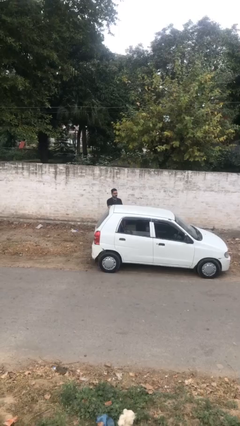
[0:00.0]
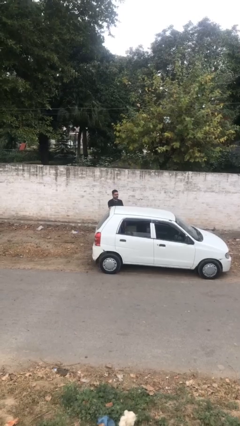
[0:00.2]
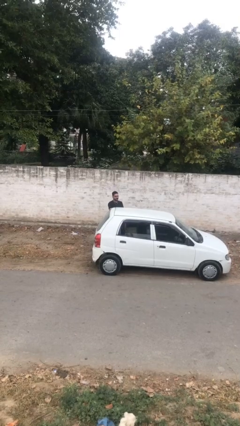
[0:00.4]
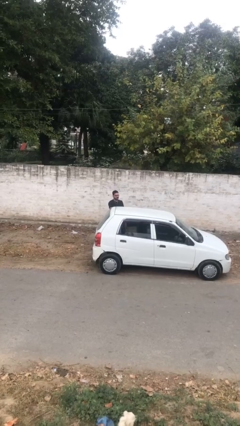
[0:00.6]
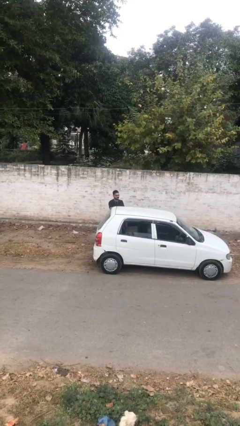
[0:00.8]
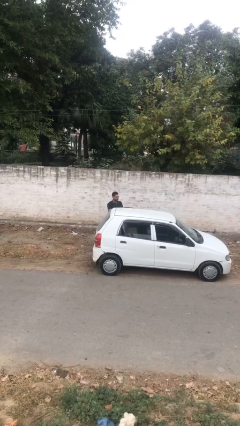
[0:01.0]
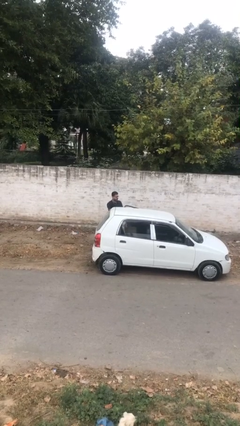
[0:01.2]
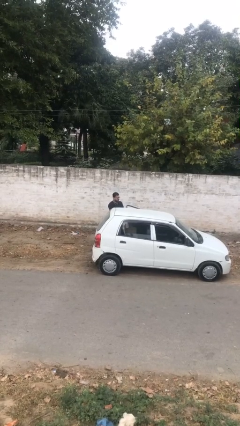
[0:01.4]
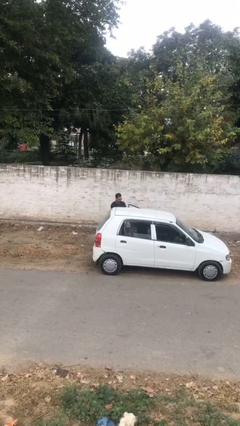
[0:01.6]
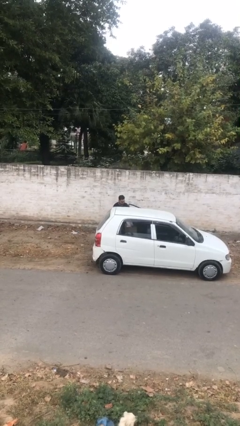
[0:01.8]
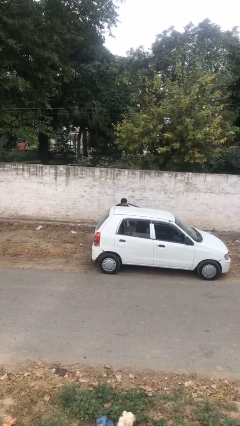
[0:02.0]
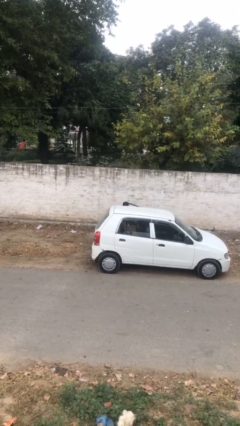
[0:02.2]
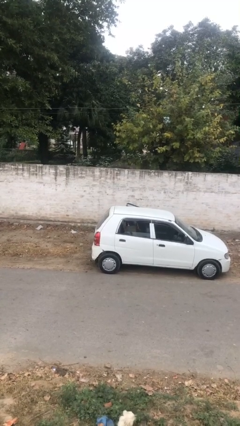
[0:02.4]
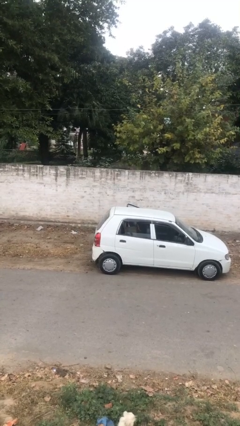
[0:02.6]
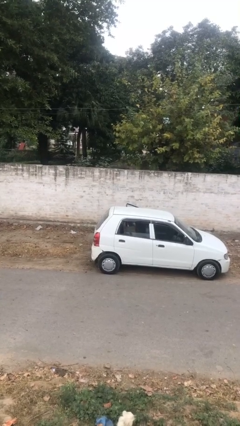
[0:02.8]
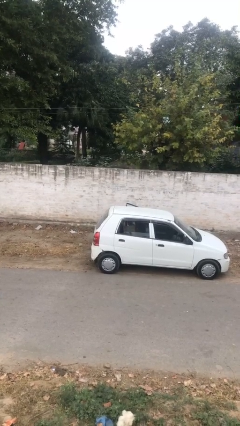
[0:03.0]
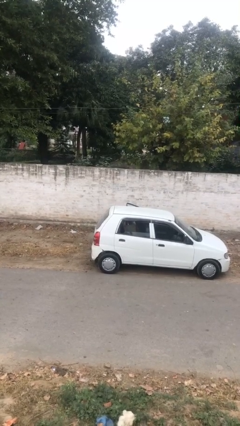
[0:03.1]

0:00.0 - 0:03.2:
person unloads car

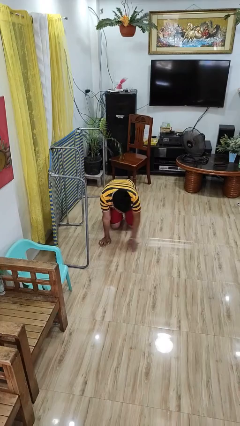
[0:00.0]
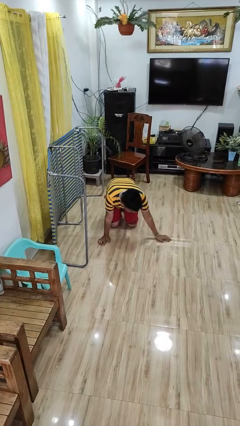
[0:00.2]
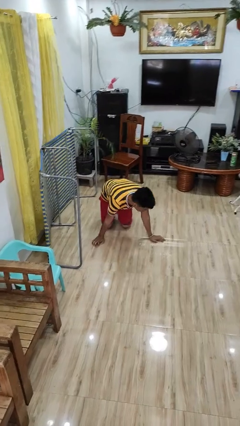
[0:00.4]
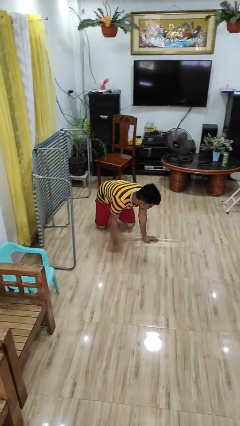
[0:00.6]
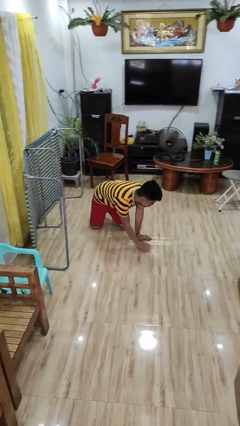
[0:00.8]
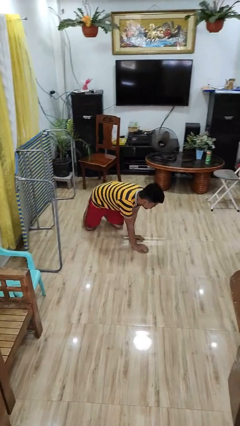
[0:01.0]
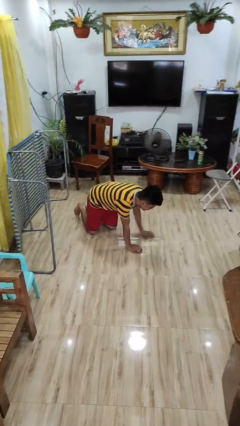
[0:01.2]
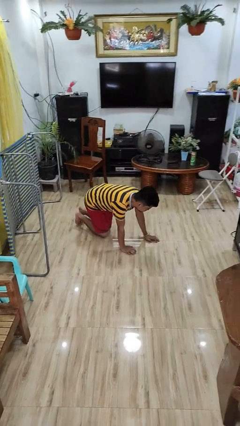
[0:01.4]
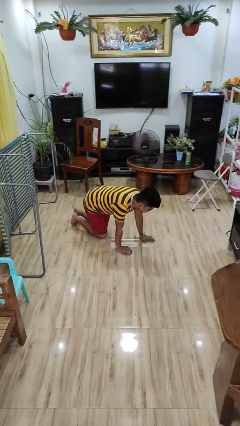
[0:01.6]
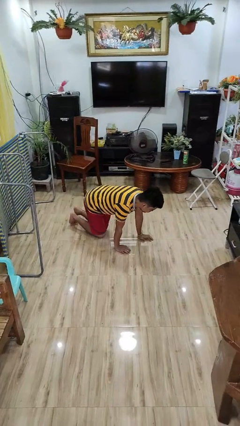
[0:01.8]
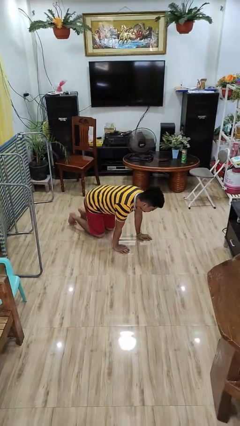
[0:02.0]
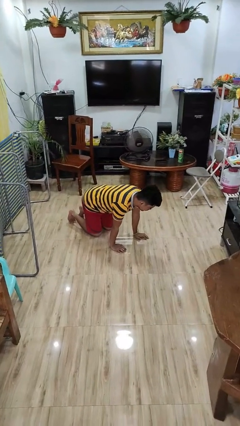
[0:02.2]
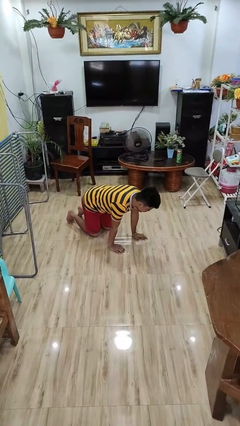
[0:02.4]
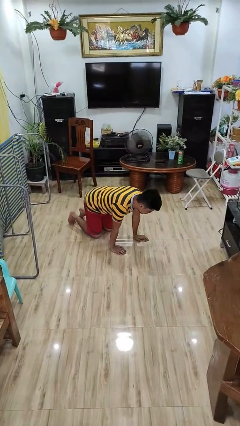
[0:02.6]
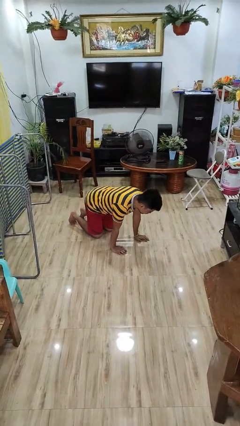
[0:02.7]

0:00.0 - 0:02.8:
person crawls

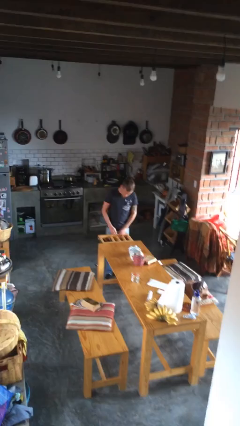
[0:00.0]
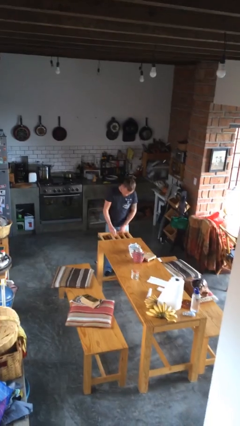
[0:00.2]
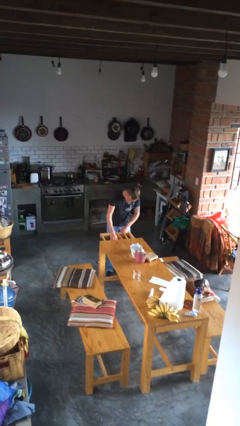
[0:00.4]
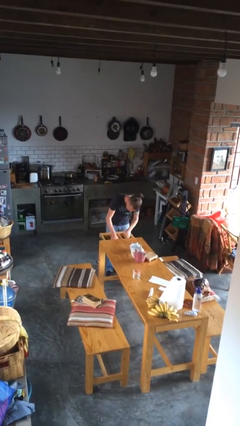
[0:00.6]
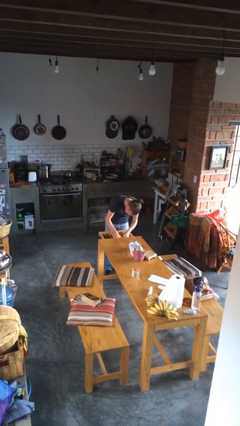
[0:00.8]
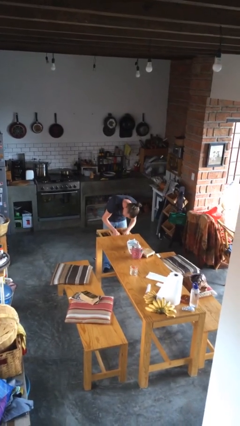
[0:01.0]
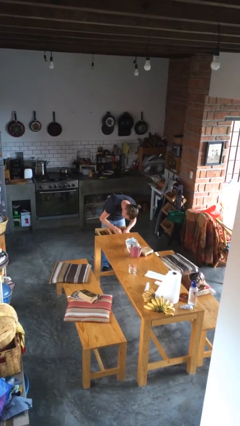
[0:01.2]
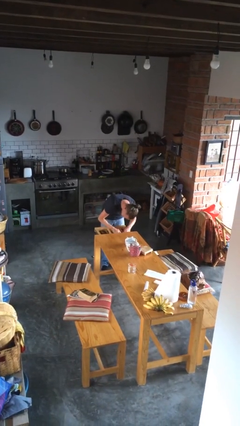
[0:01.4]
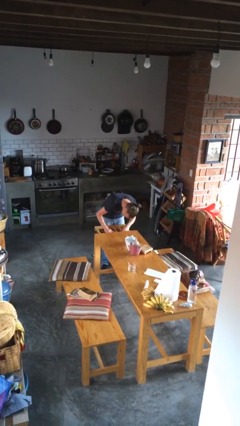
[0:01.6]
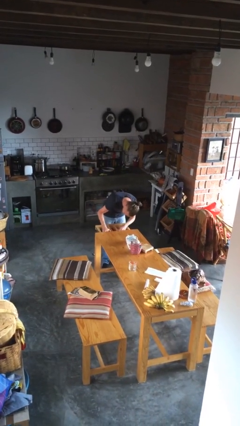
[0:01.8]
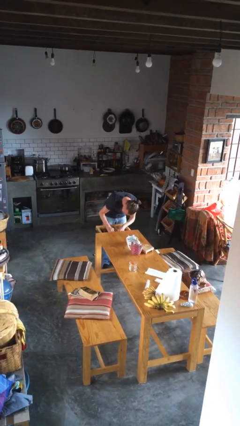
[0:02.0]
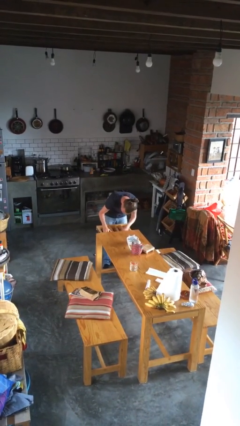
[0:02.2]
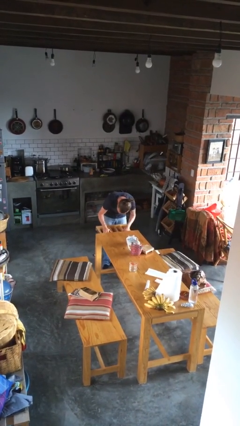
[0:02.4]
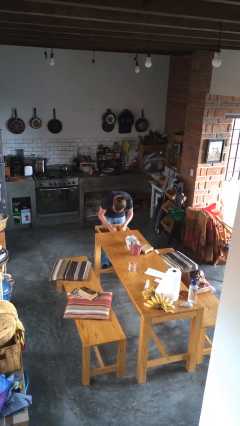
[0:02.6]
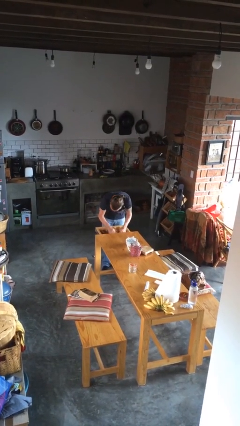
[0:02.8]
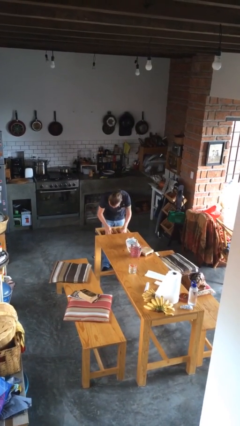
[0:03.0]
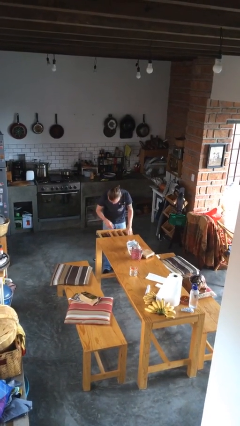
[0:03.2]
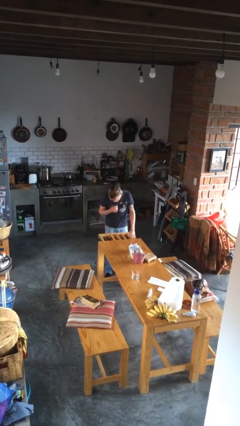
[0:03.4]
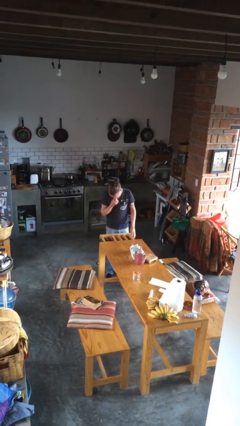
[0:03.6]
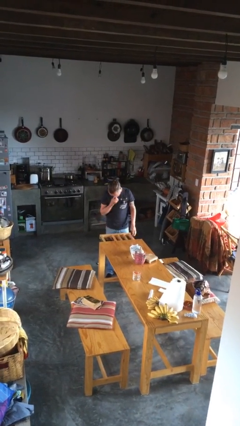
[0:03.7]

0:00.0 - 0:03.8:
person searches in cabinet

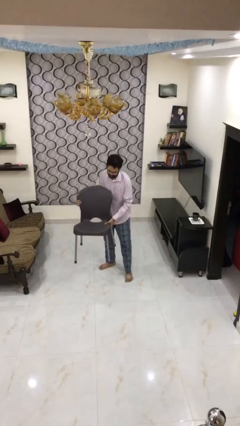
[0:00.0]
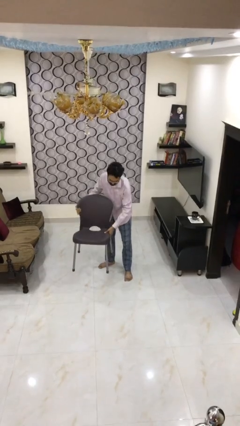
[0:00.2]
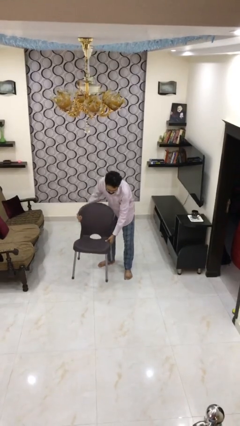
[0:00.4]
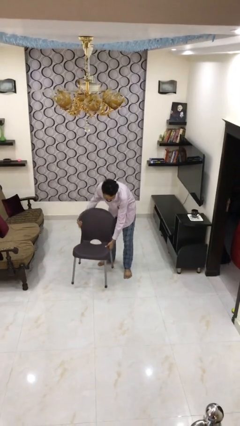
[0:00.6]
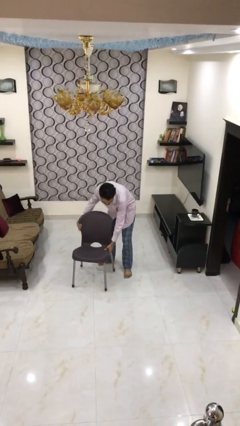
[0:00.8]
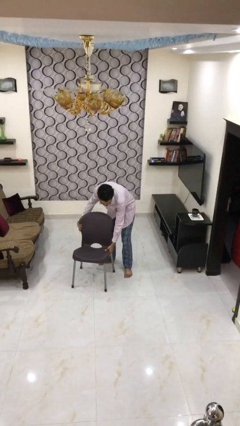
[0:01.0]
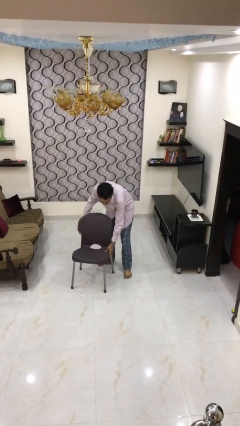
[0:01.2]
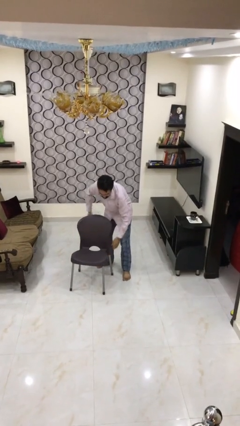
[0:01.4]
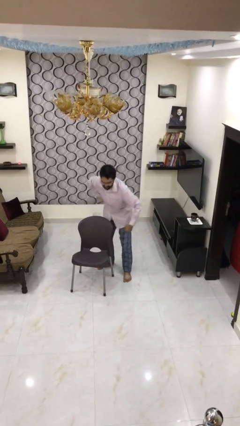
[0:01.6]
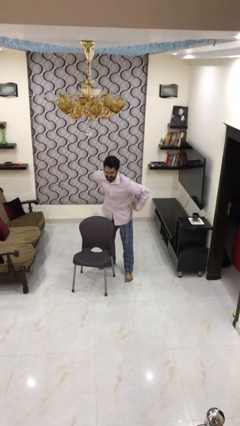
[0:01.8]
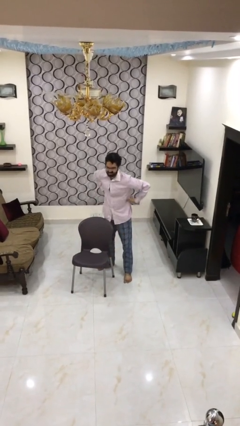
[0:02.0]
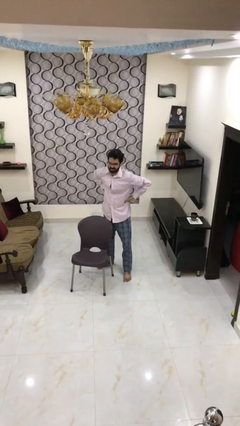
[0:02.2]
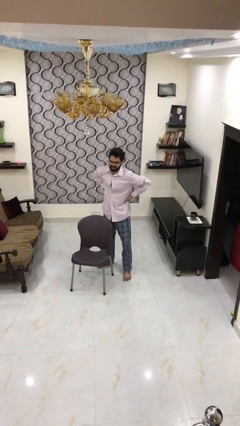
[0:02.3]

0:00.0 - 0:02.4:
person puts down object on floor

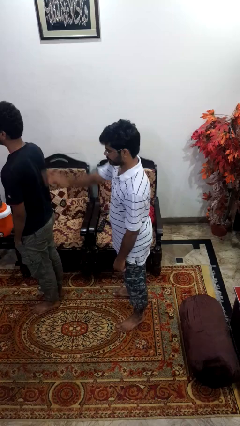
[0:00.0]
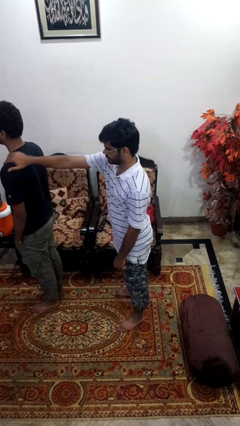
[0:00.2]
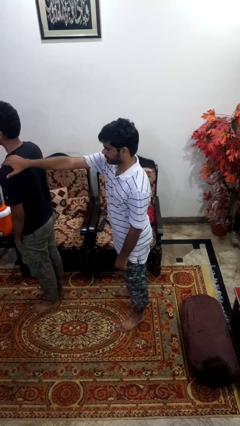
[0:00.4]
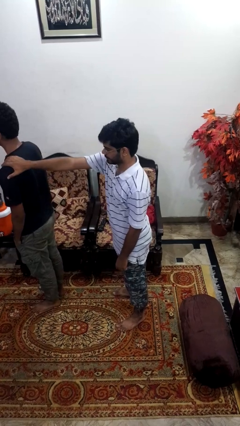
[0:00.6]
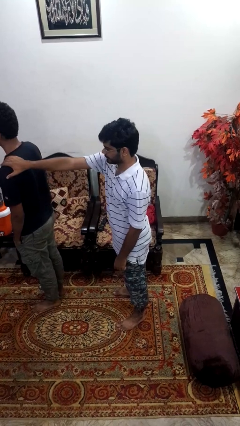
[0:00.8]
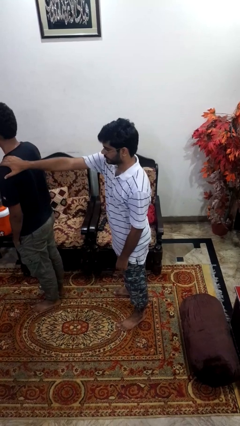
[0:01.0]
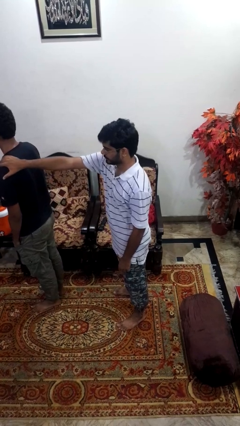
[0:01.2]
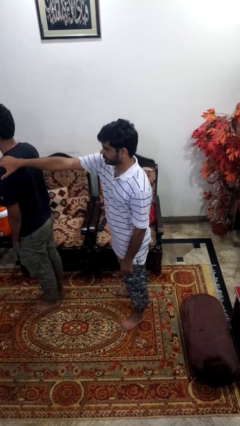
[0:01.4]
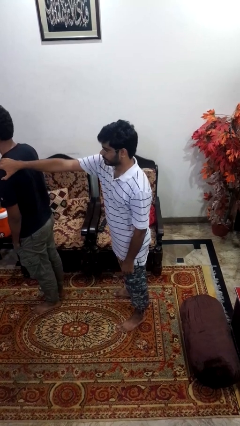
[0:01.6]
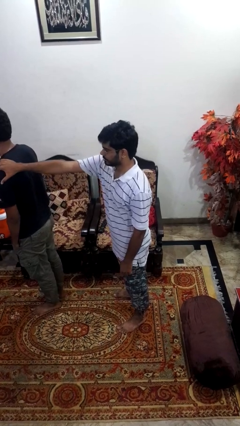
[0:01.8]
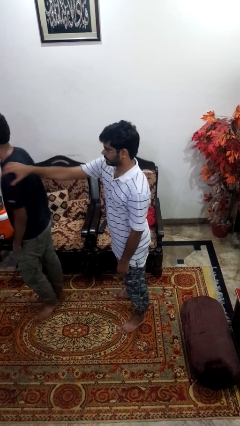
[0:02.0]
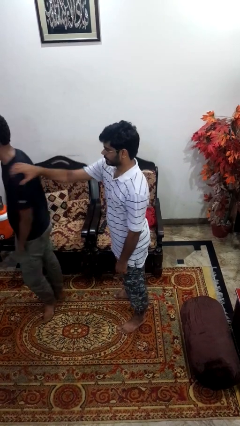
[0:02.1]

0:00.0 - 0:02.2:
person grabs person by shoulder

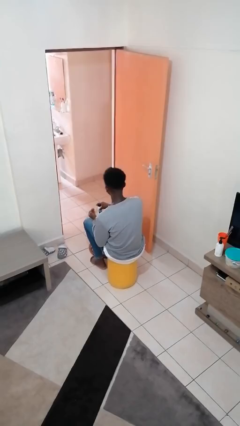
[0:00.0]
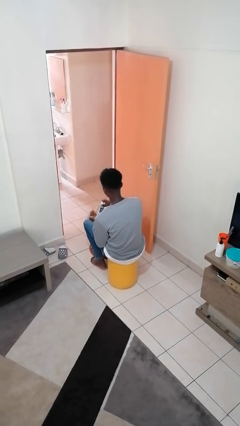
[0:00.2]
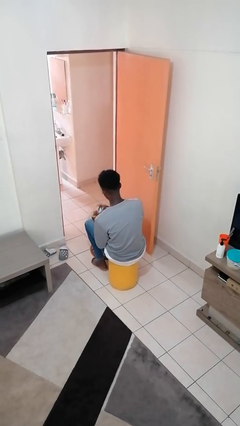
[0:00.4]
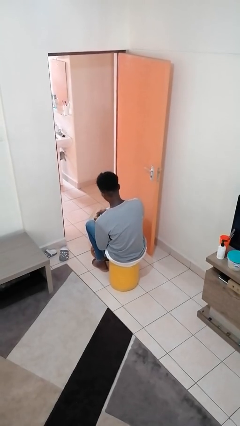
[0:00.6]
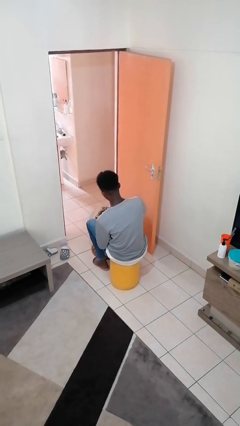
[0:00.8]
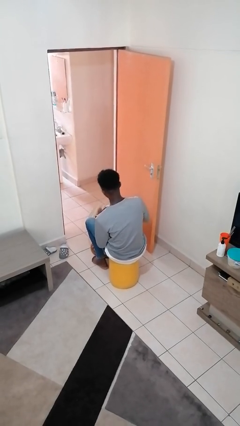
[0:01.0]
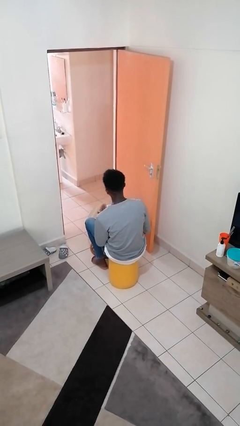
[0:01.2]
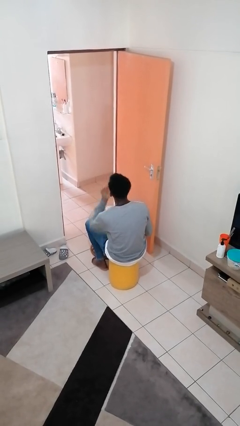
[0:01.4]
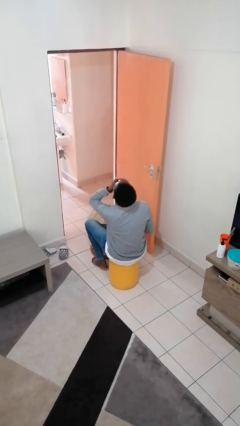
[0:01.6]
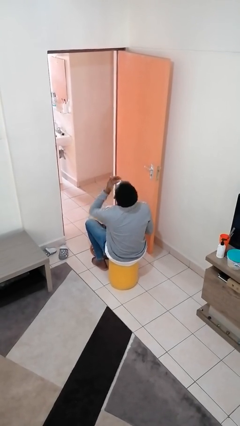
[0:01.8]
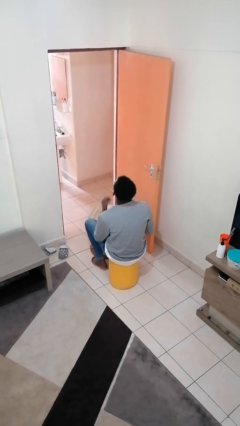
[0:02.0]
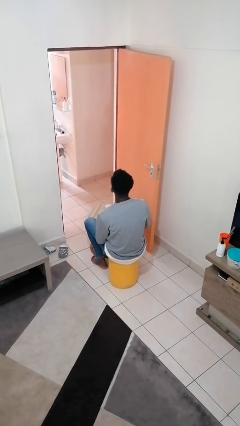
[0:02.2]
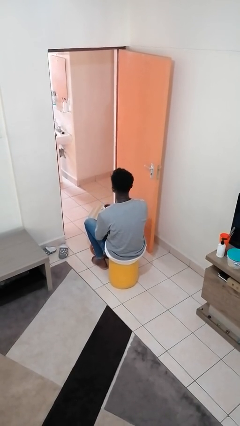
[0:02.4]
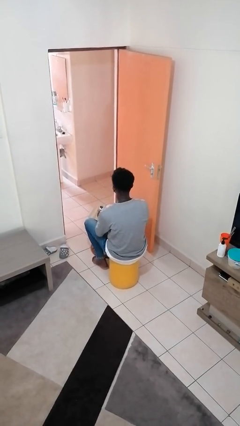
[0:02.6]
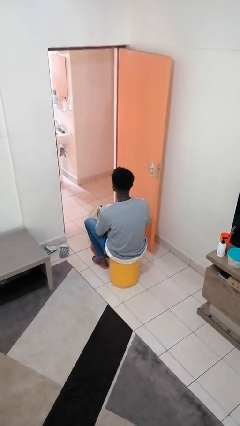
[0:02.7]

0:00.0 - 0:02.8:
person takes medicine pills
